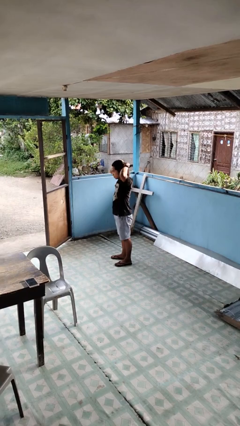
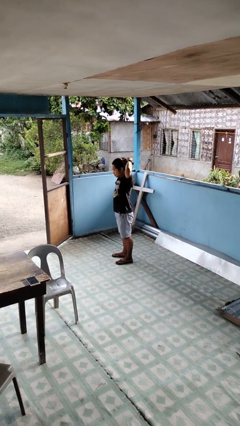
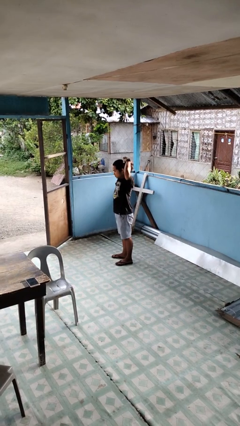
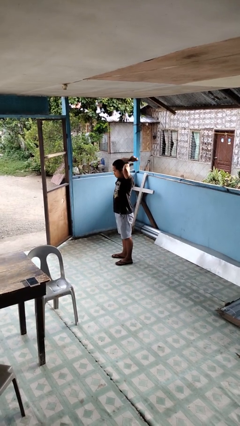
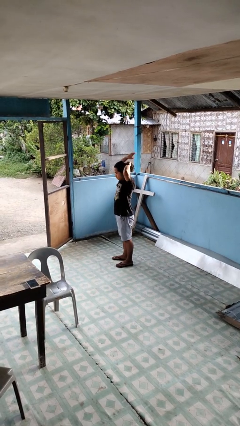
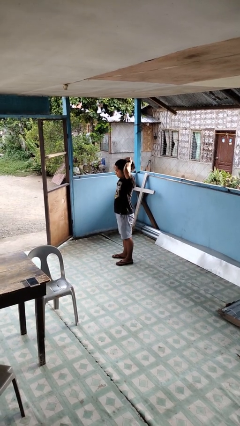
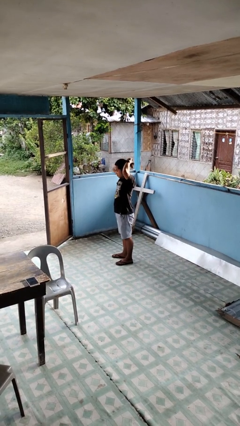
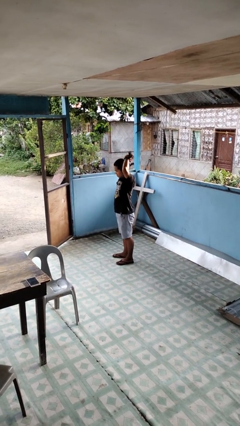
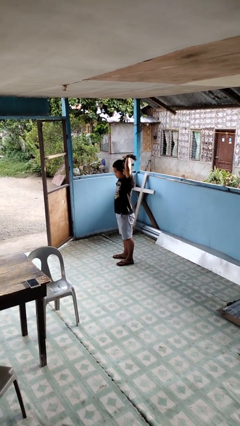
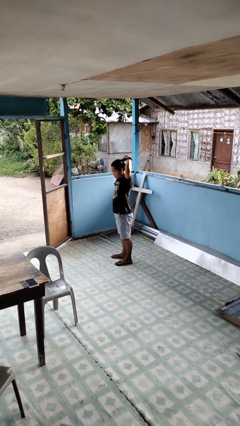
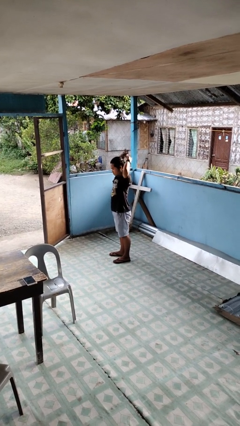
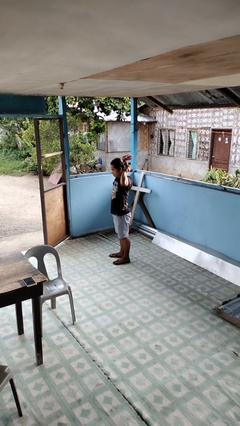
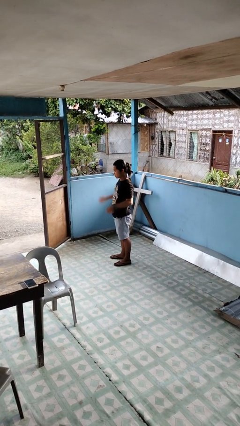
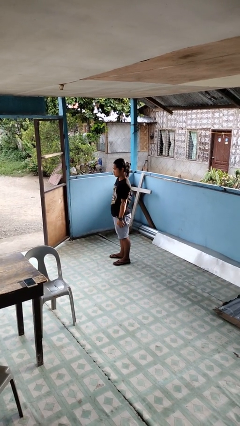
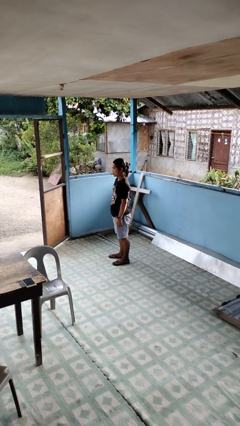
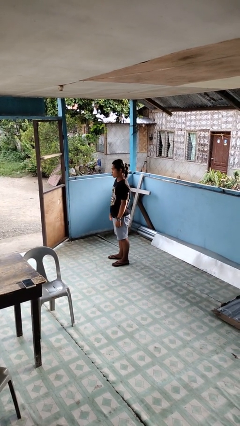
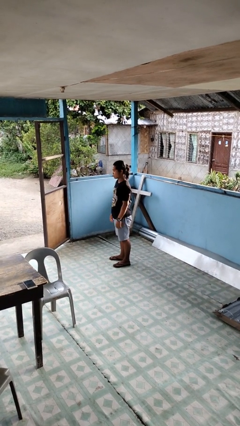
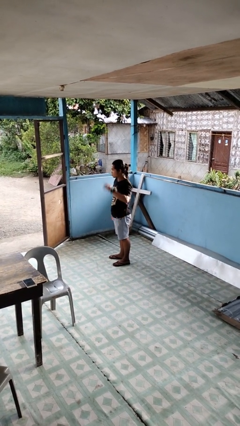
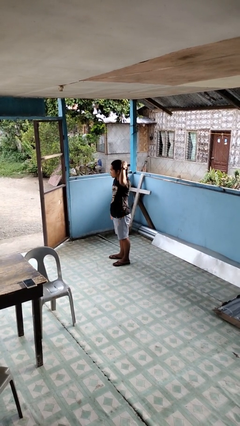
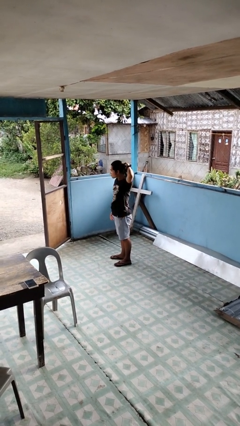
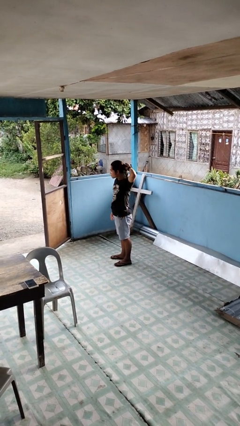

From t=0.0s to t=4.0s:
person puts hair in ponytail

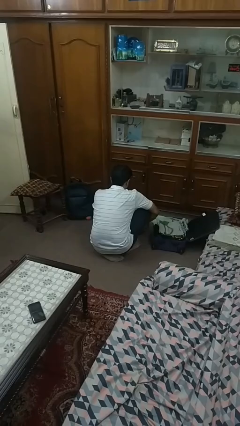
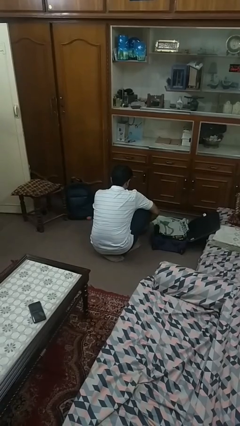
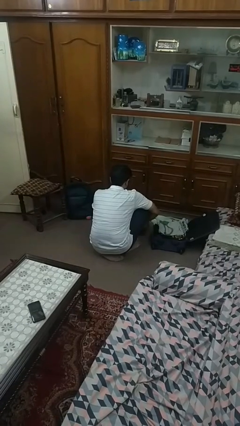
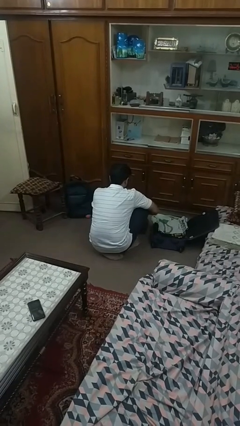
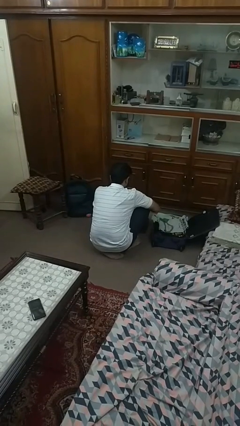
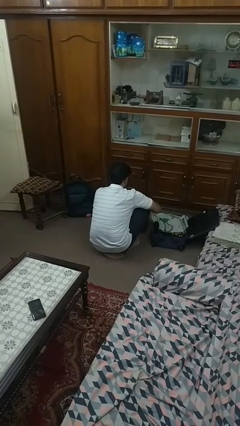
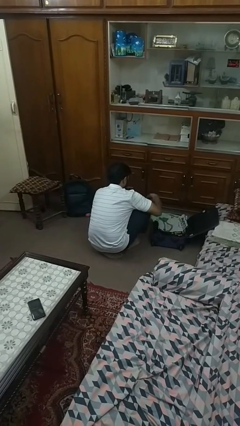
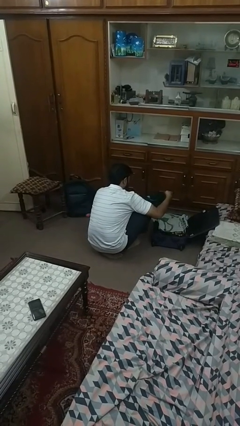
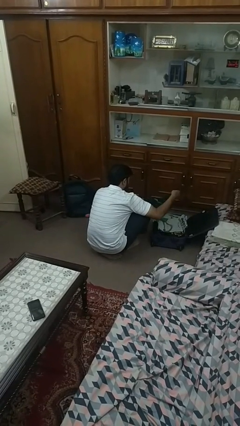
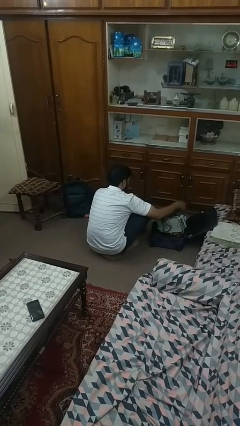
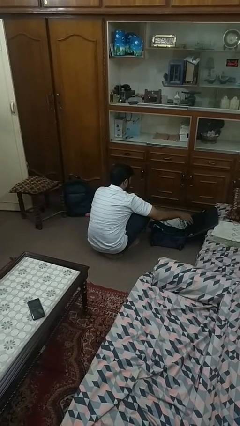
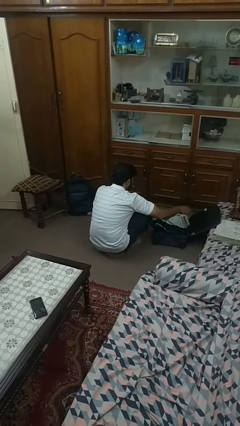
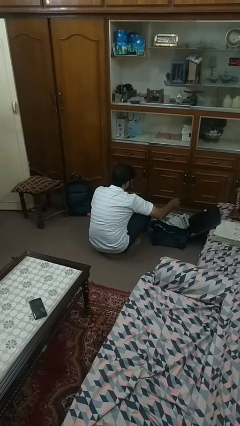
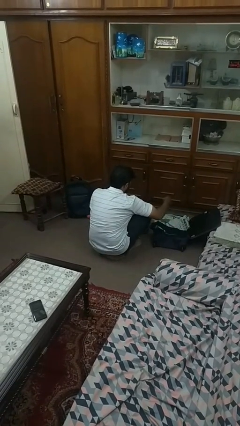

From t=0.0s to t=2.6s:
person loads clothes into suitcase

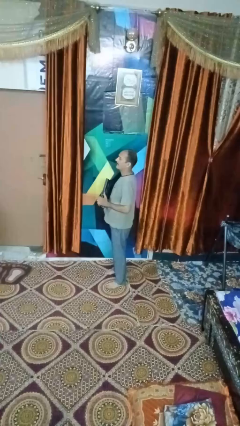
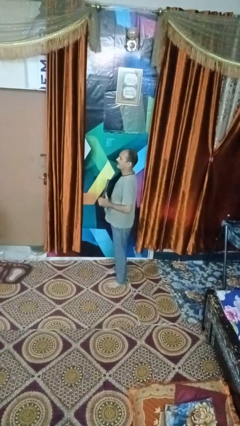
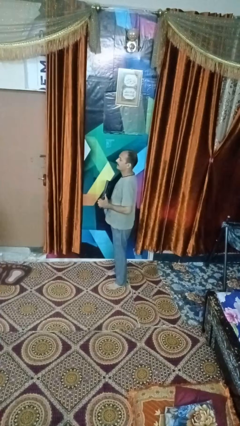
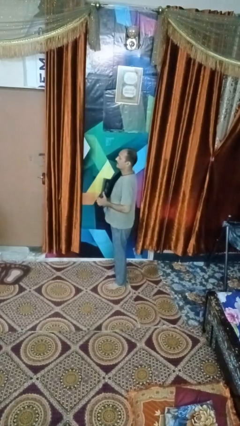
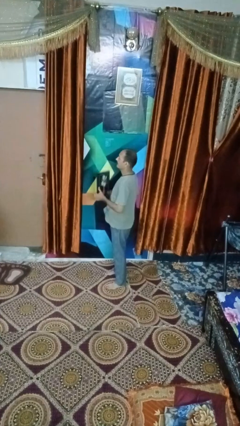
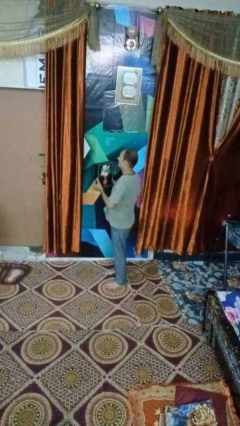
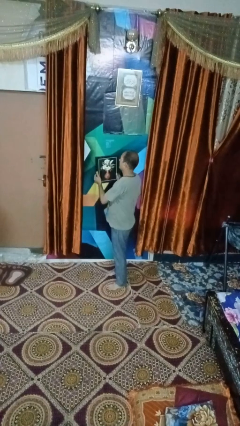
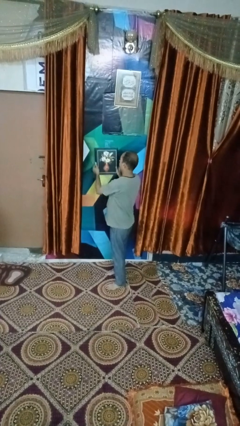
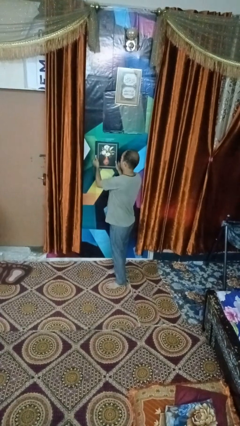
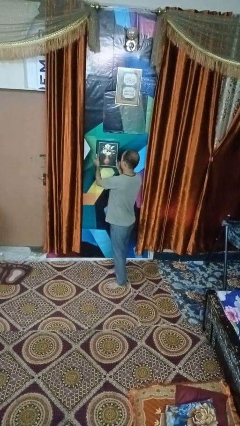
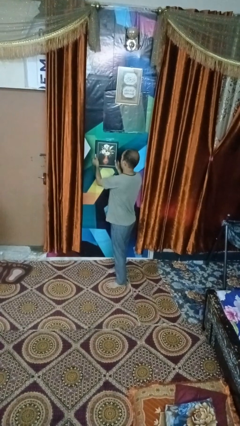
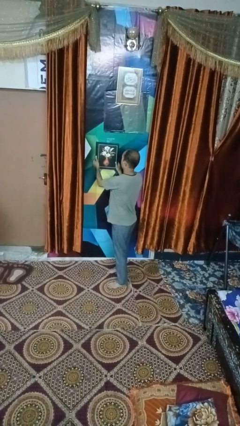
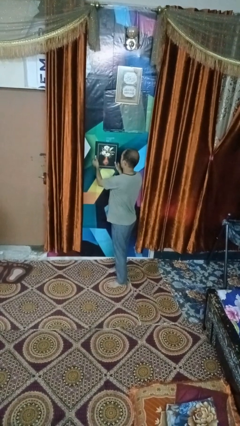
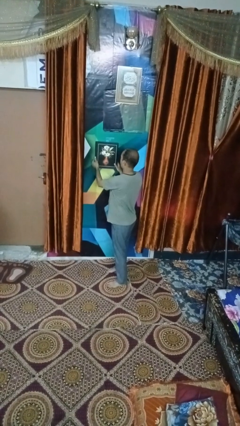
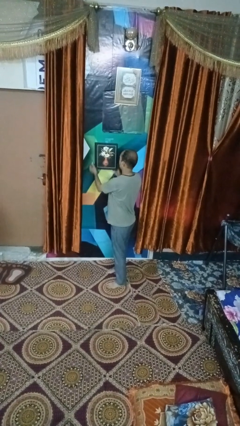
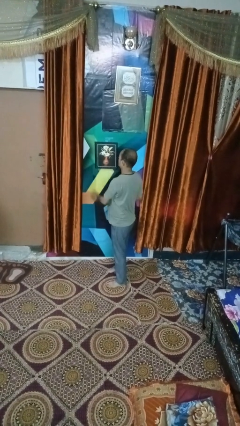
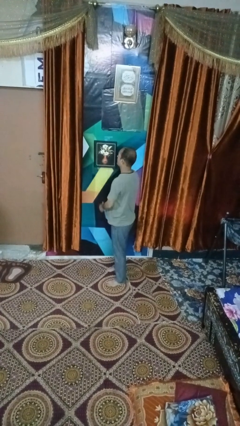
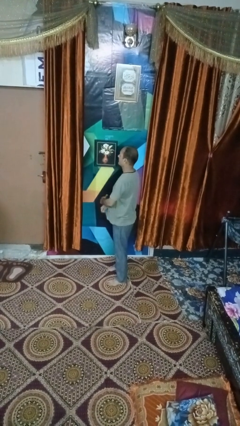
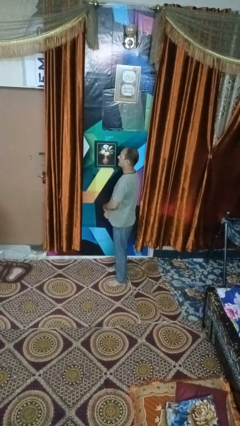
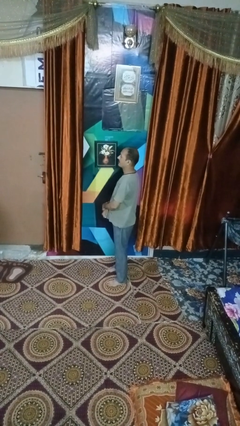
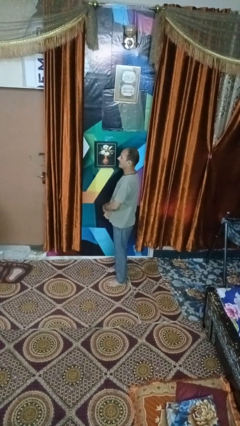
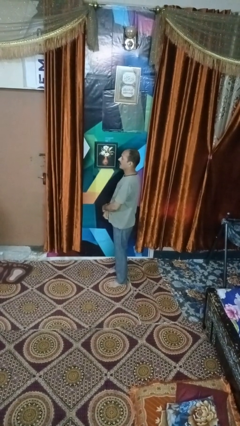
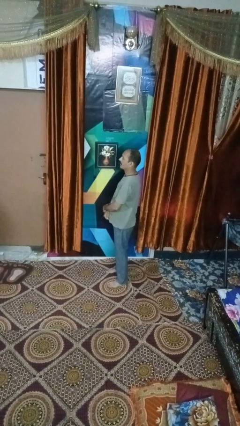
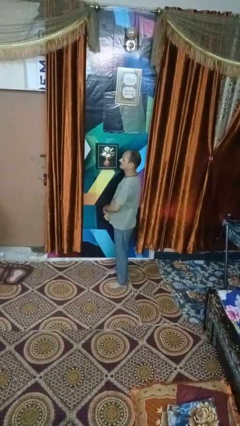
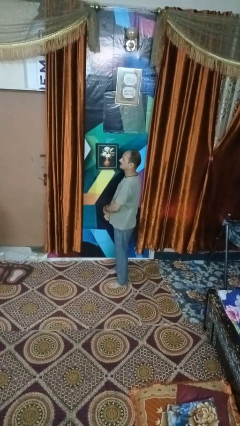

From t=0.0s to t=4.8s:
person puts up picture frame

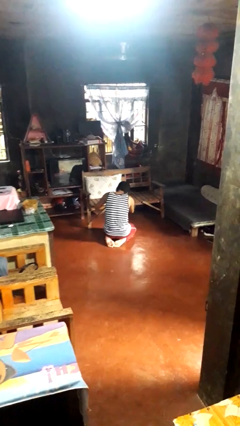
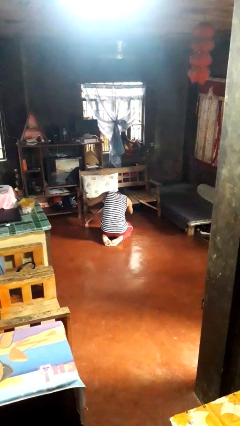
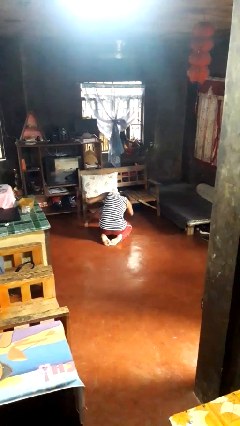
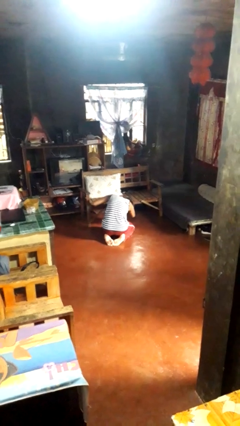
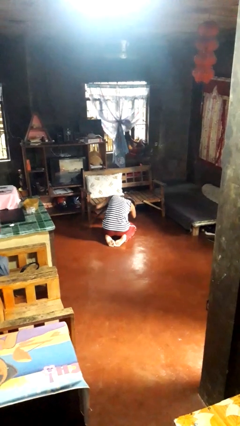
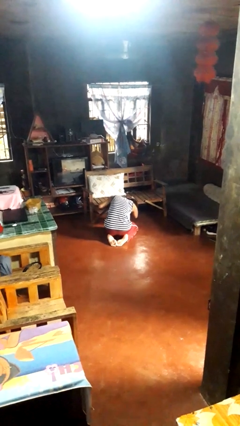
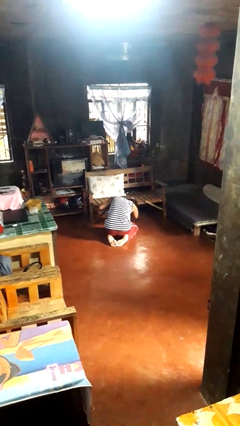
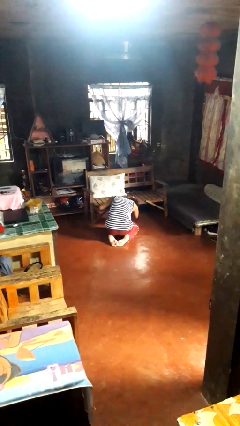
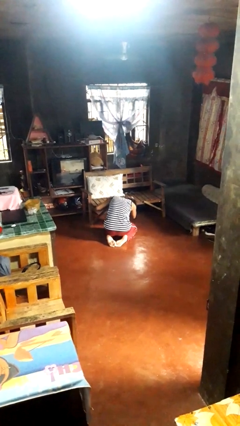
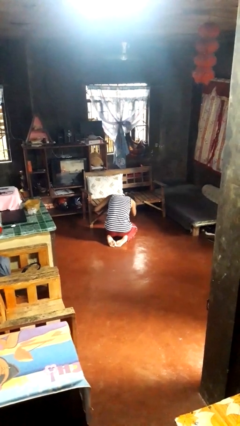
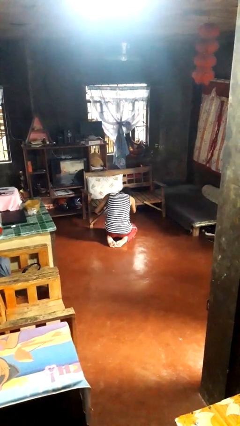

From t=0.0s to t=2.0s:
person searches under couch

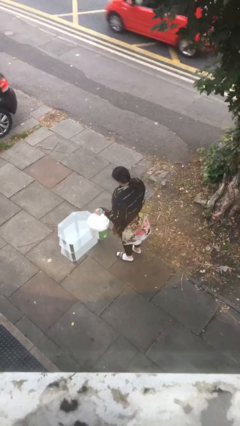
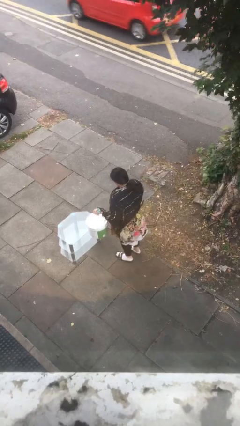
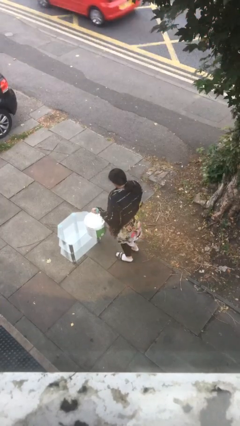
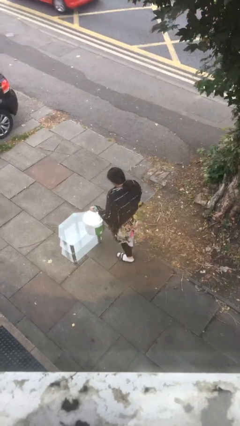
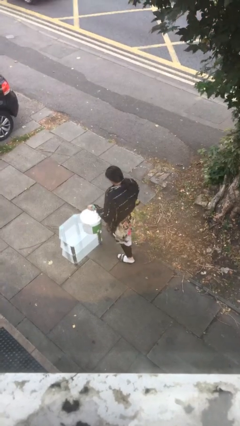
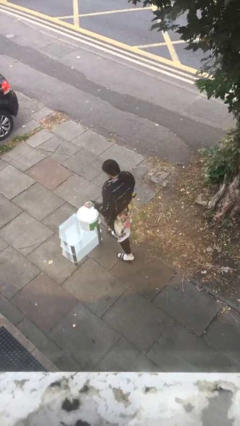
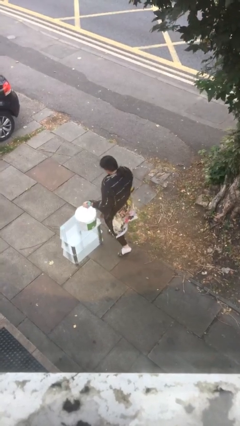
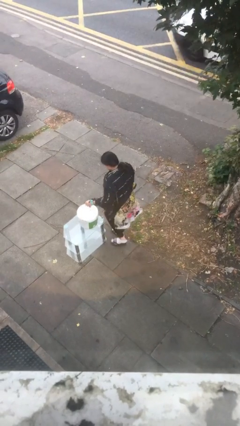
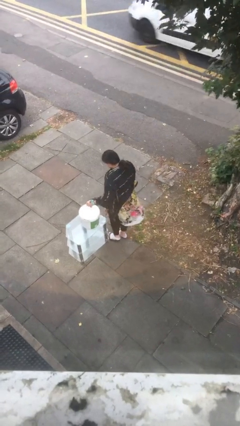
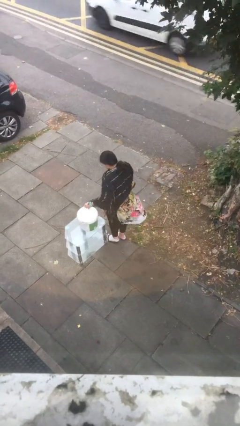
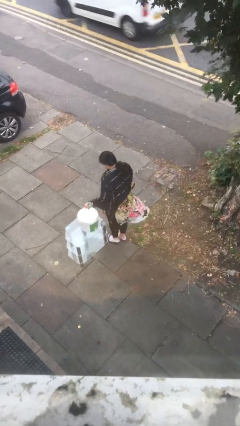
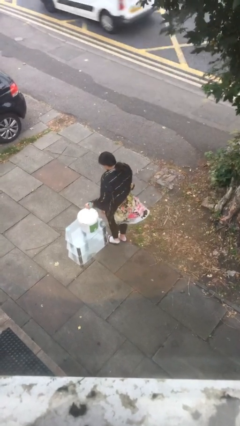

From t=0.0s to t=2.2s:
person puts down object on table

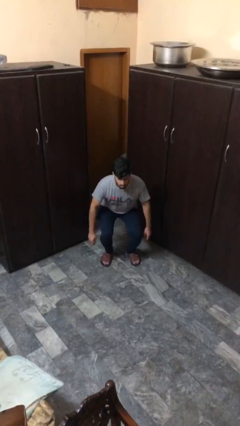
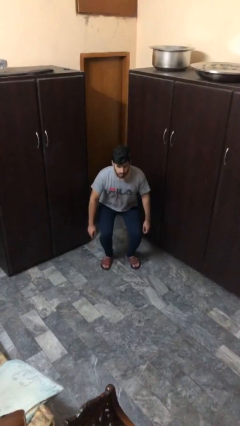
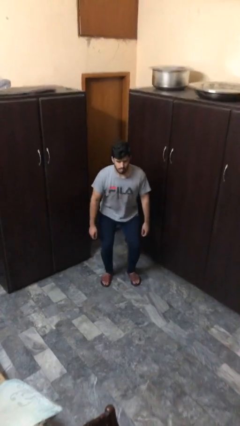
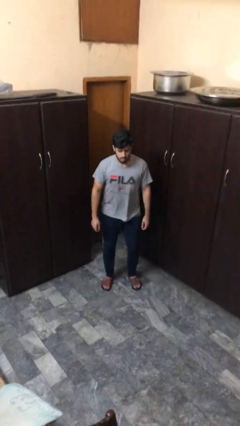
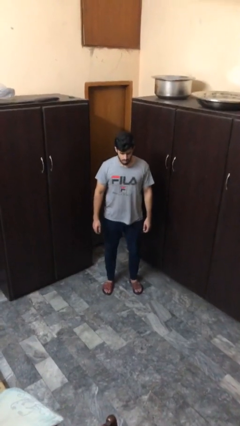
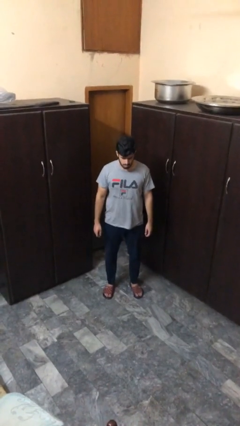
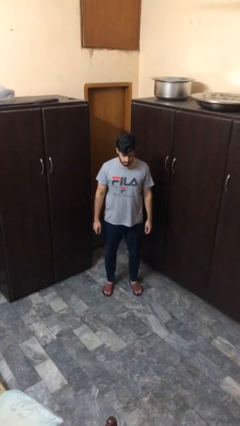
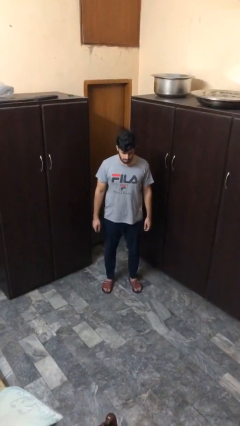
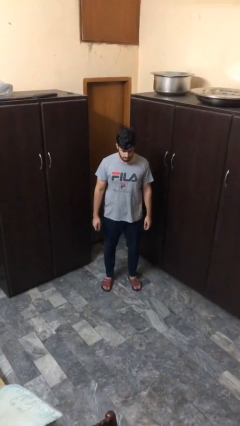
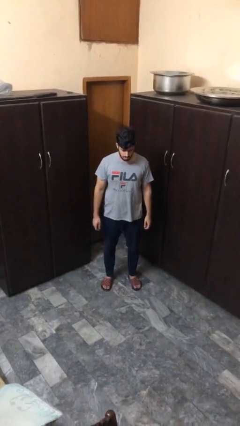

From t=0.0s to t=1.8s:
person stands up

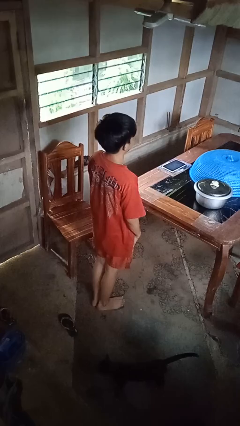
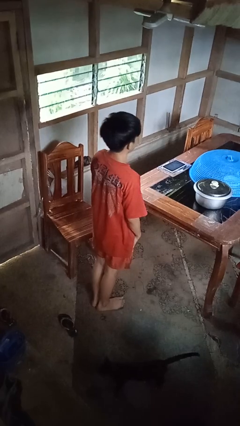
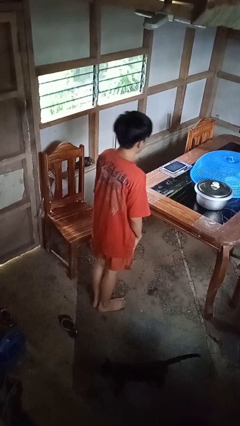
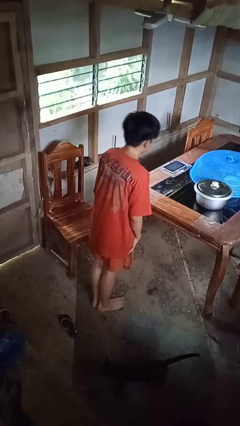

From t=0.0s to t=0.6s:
person bows
